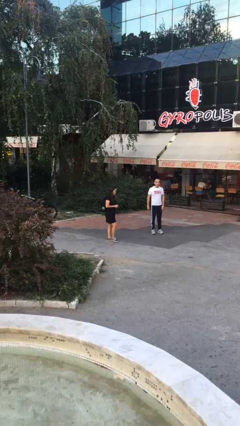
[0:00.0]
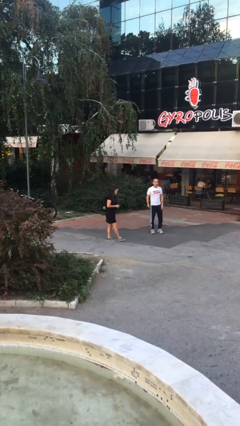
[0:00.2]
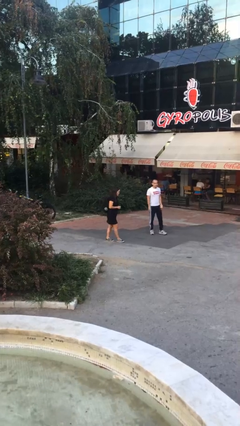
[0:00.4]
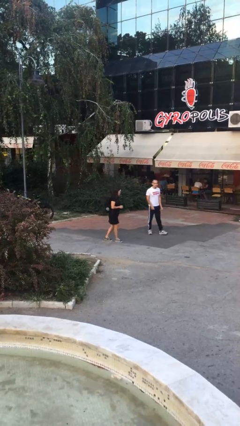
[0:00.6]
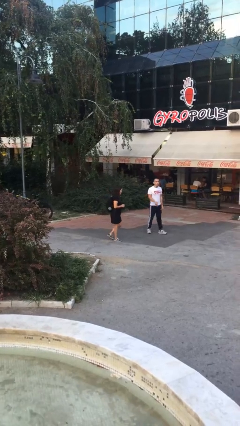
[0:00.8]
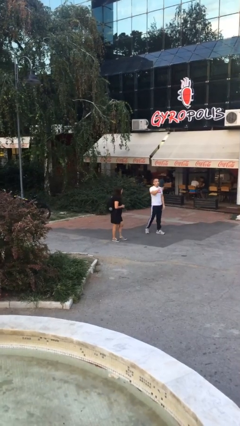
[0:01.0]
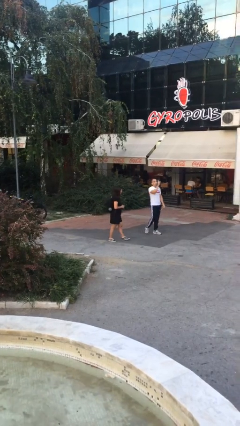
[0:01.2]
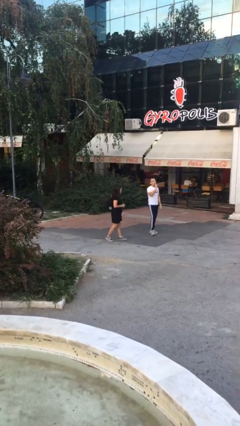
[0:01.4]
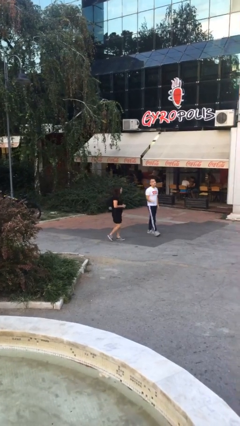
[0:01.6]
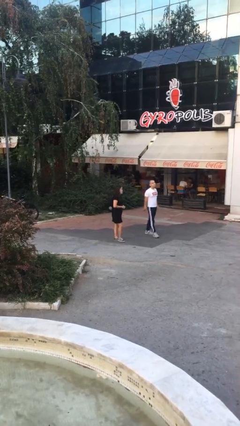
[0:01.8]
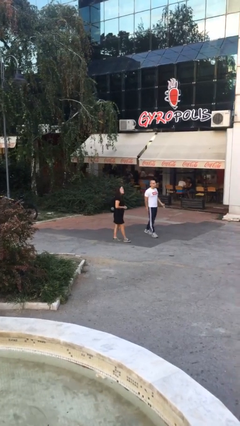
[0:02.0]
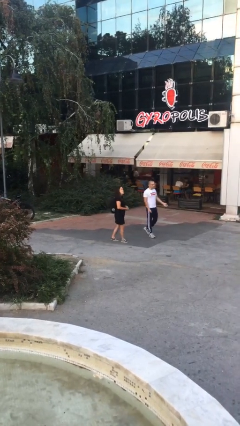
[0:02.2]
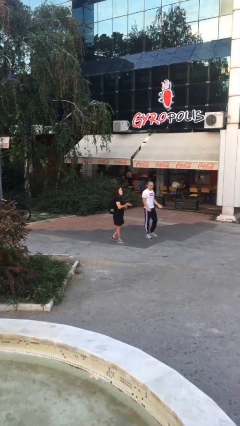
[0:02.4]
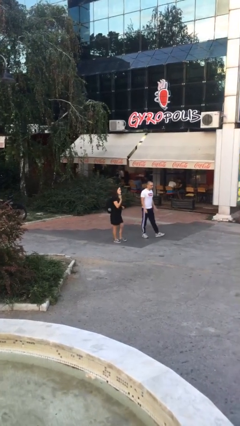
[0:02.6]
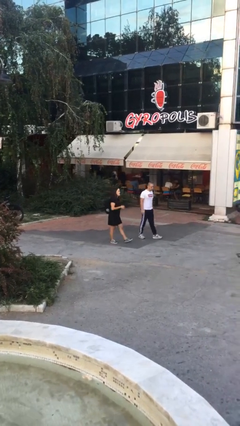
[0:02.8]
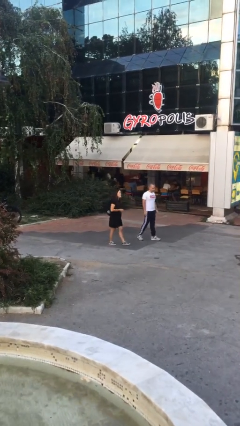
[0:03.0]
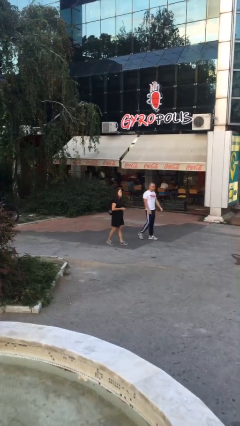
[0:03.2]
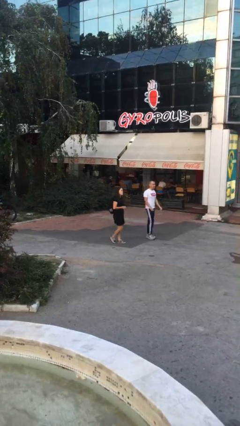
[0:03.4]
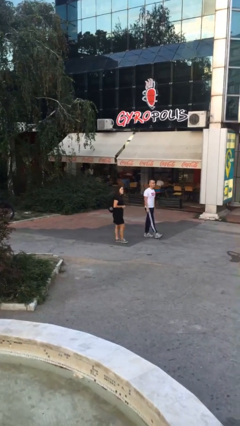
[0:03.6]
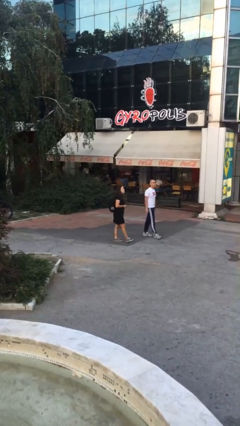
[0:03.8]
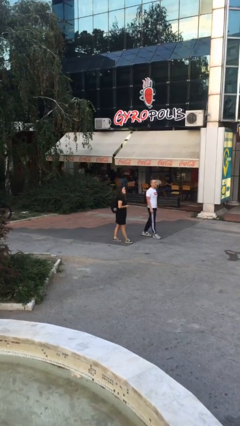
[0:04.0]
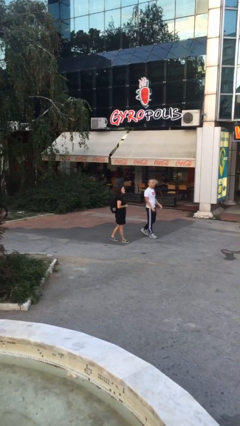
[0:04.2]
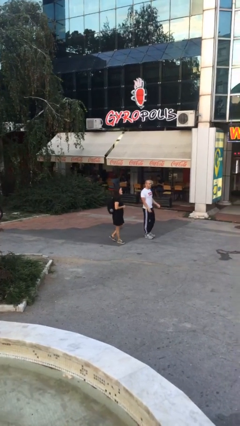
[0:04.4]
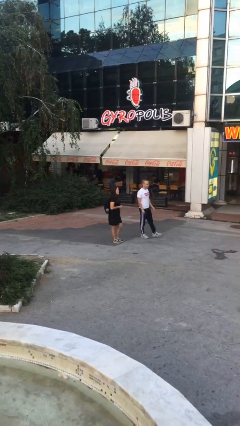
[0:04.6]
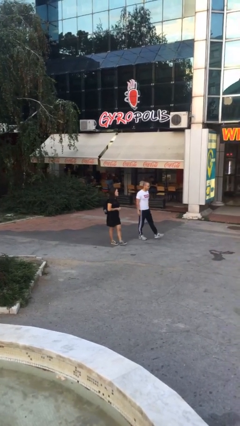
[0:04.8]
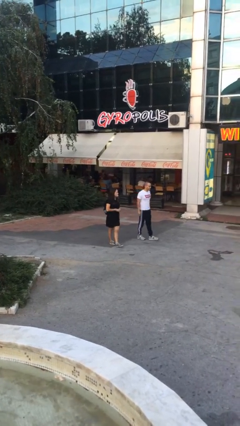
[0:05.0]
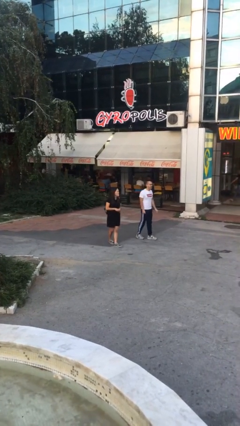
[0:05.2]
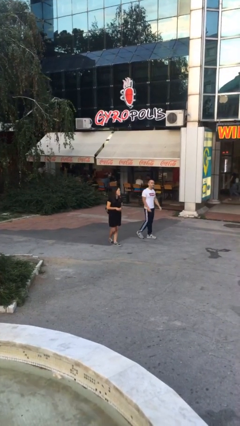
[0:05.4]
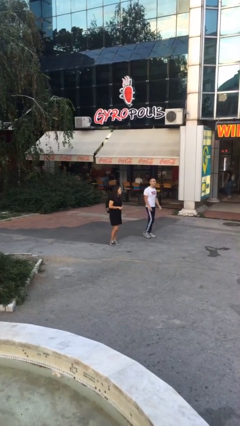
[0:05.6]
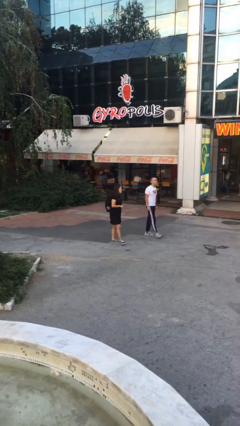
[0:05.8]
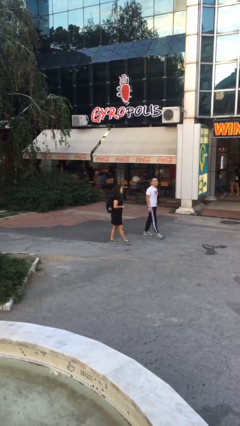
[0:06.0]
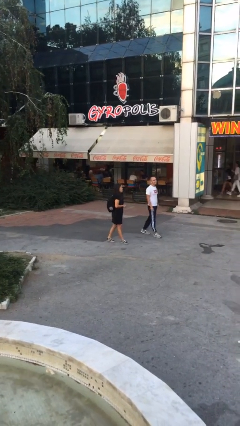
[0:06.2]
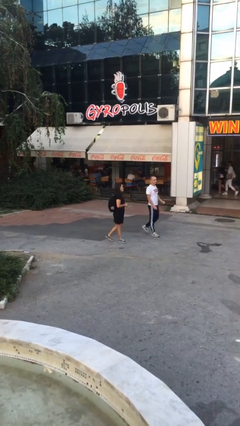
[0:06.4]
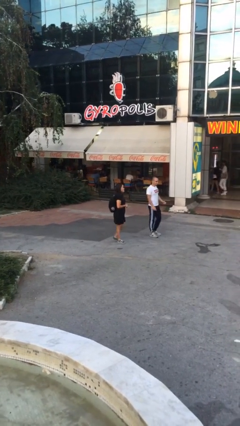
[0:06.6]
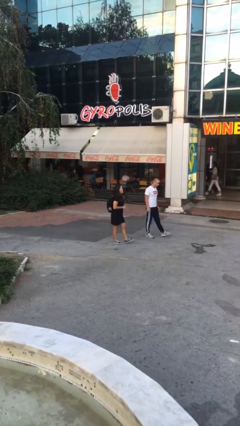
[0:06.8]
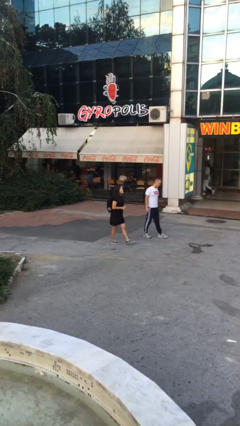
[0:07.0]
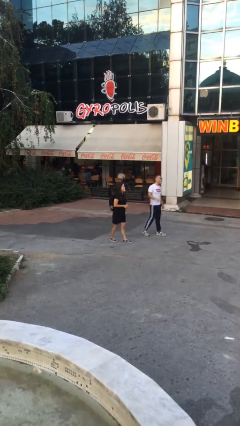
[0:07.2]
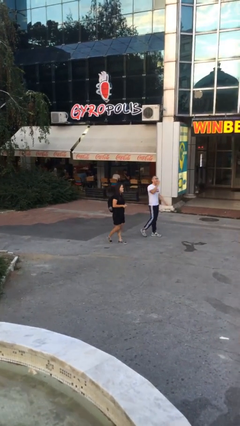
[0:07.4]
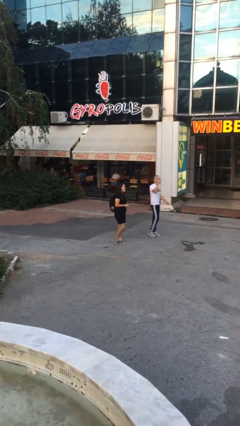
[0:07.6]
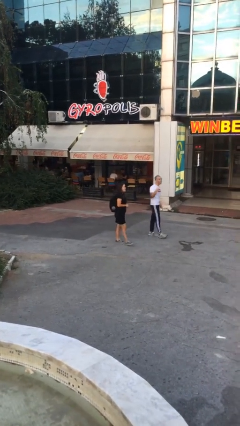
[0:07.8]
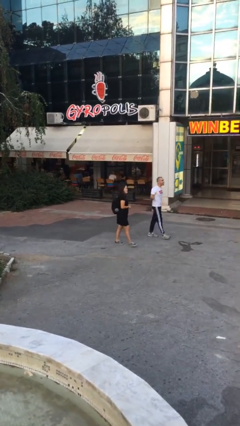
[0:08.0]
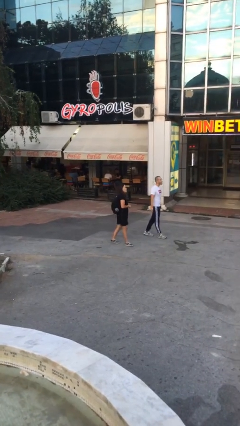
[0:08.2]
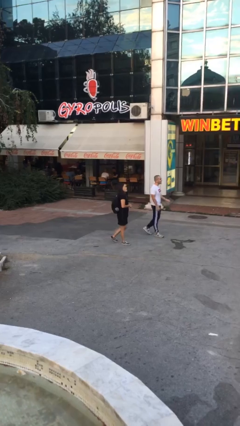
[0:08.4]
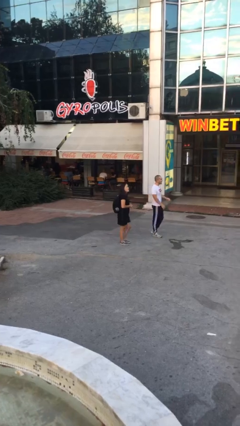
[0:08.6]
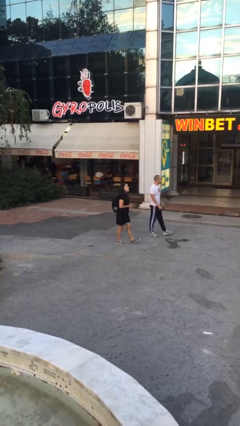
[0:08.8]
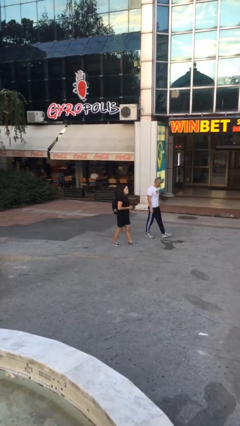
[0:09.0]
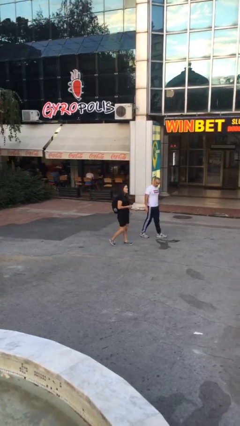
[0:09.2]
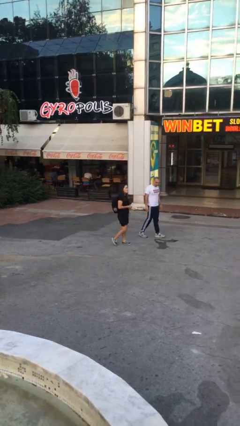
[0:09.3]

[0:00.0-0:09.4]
person talks to person

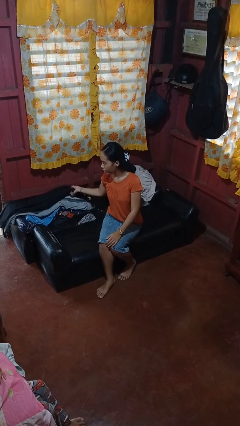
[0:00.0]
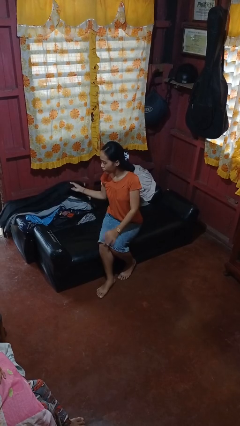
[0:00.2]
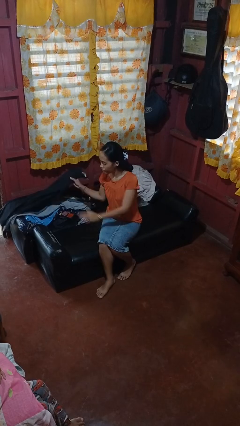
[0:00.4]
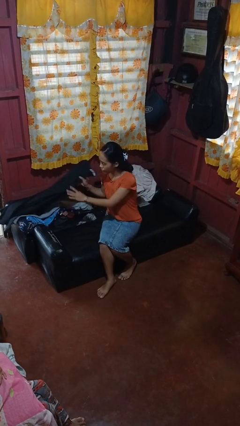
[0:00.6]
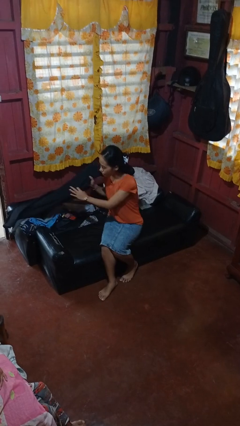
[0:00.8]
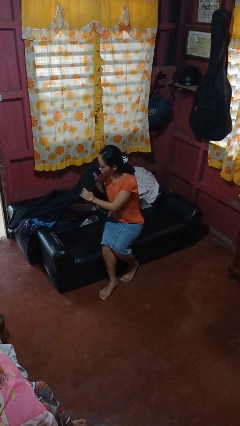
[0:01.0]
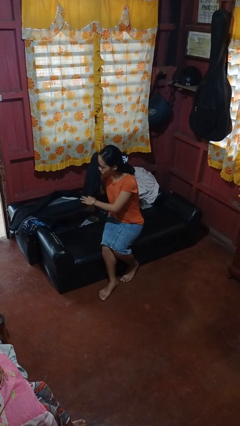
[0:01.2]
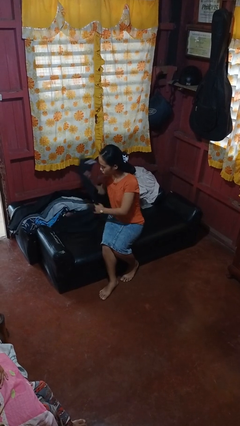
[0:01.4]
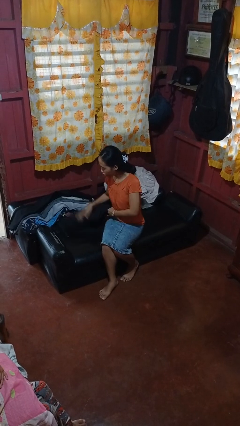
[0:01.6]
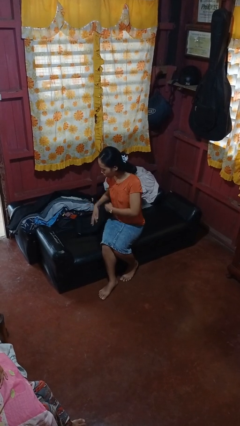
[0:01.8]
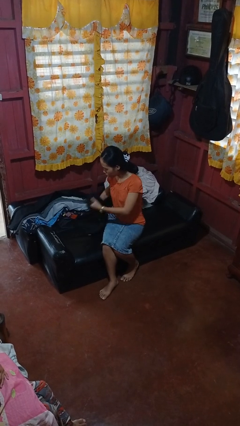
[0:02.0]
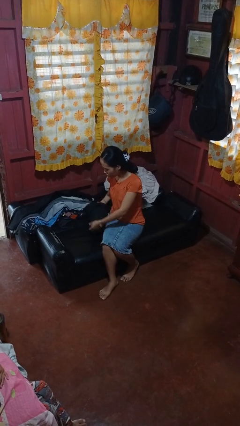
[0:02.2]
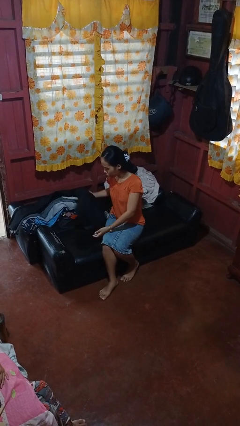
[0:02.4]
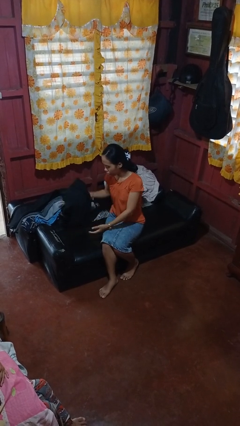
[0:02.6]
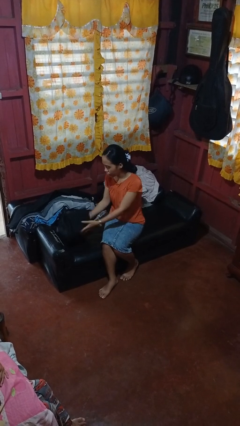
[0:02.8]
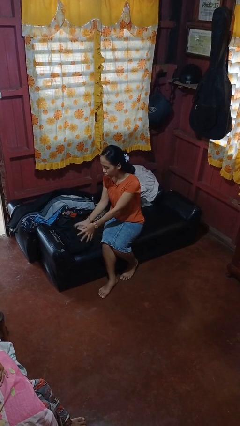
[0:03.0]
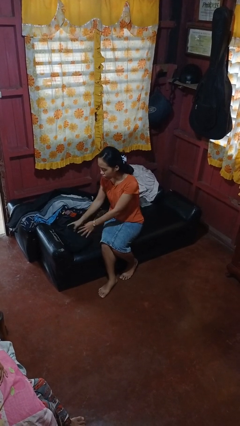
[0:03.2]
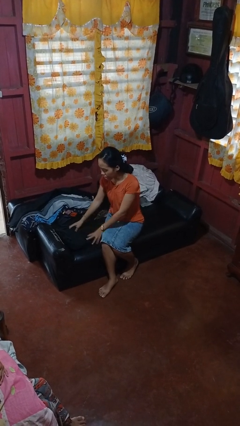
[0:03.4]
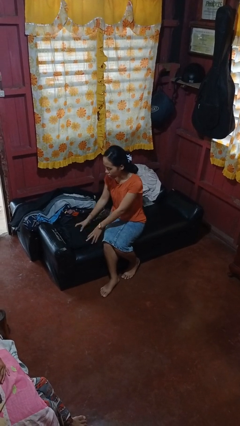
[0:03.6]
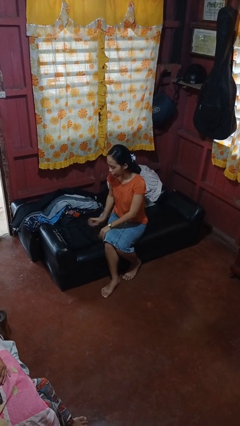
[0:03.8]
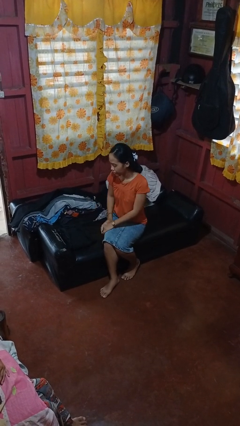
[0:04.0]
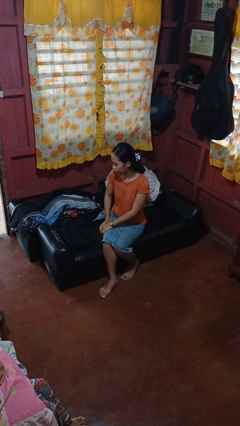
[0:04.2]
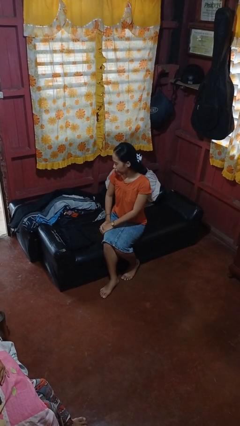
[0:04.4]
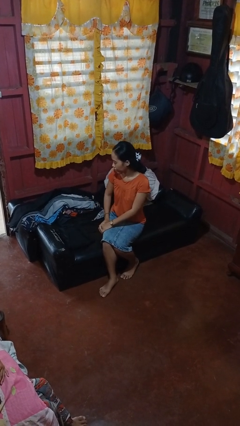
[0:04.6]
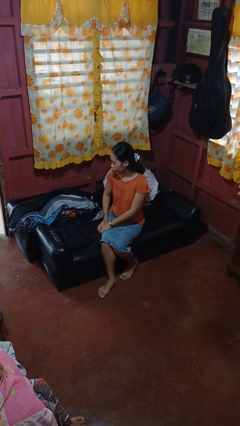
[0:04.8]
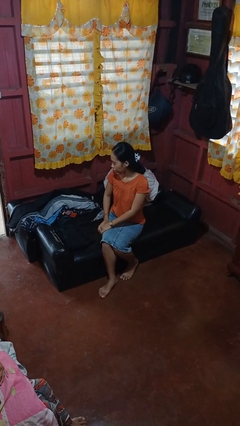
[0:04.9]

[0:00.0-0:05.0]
person folds pants

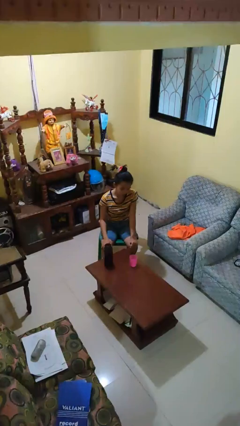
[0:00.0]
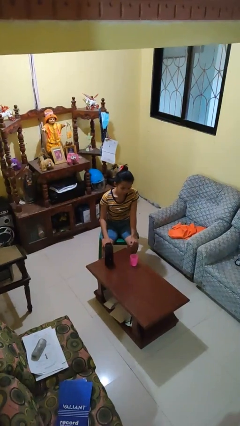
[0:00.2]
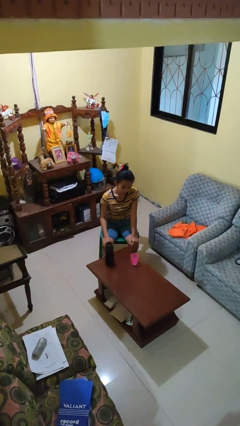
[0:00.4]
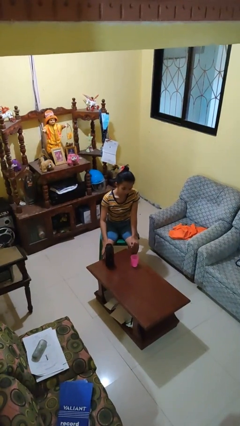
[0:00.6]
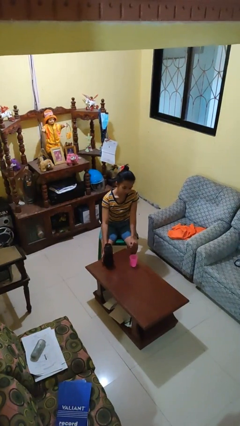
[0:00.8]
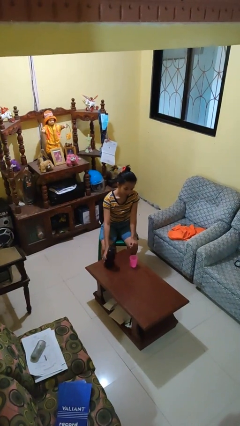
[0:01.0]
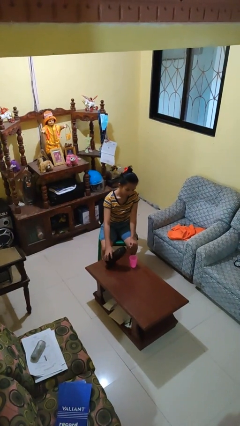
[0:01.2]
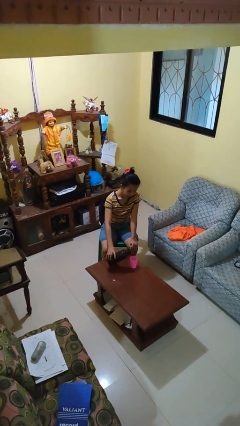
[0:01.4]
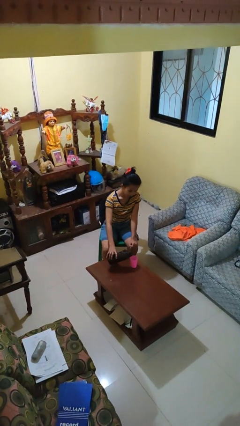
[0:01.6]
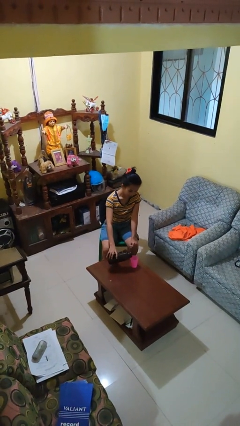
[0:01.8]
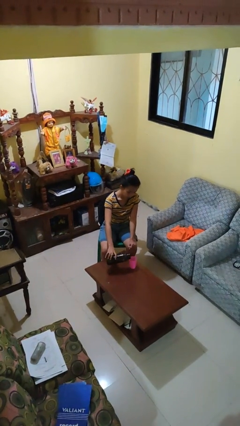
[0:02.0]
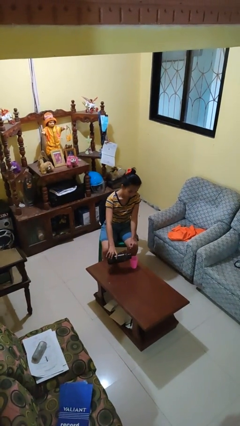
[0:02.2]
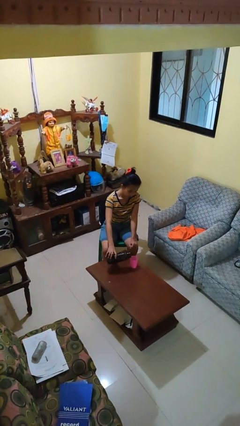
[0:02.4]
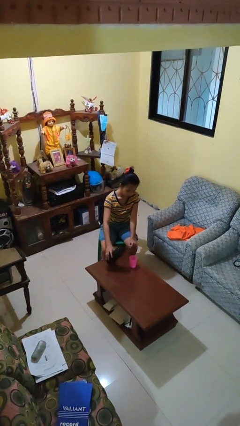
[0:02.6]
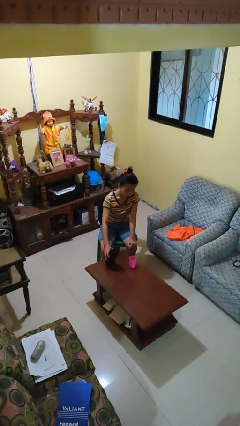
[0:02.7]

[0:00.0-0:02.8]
person pours liquid into cup

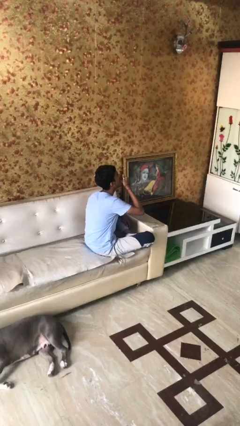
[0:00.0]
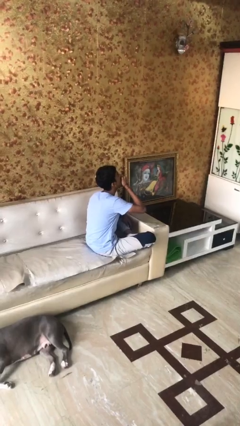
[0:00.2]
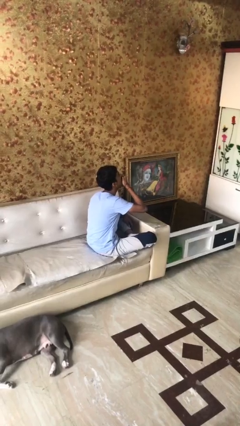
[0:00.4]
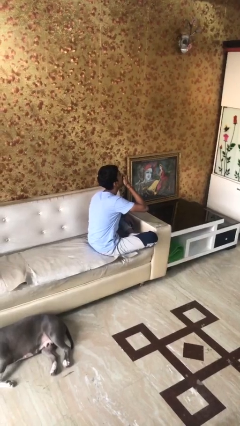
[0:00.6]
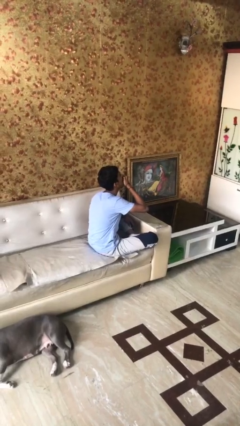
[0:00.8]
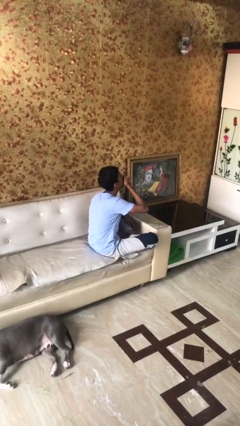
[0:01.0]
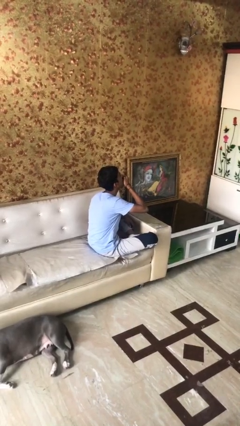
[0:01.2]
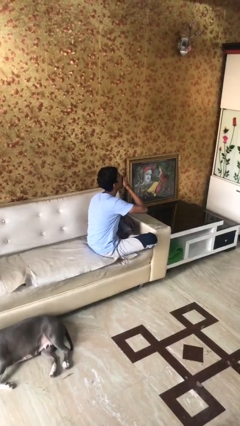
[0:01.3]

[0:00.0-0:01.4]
person yawns
